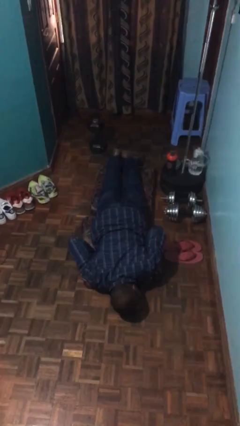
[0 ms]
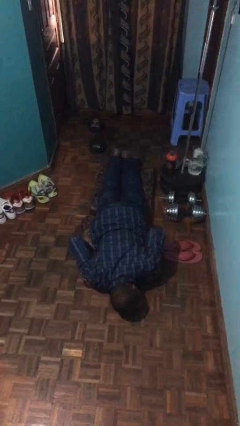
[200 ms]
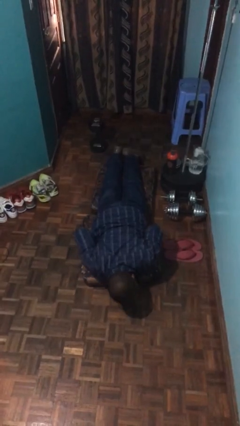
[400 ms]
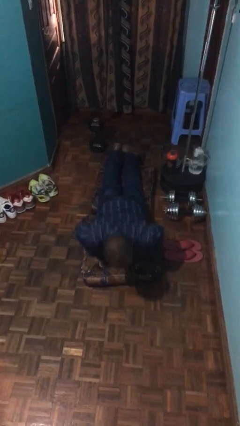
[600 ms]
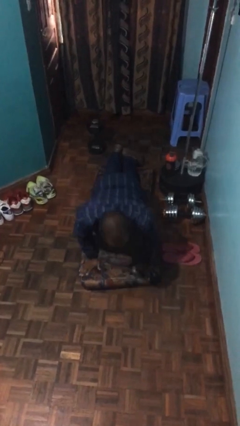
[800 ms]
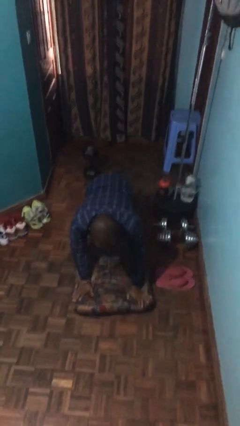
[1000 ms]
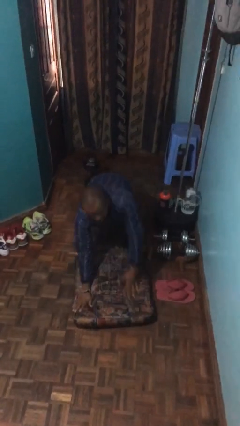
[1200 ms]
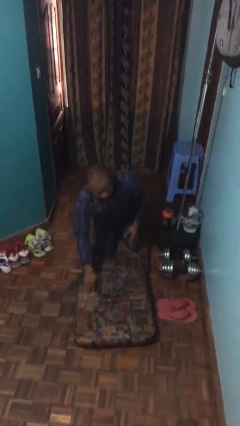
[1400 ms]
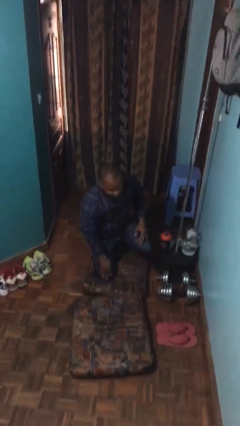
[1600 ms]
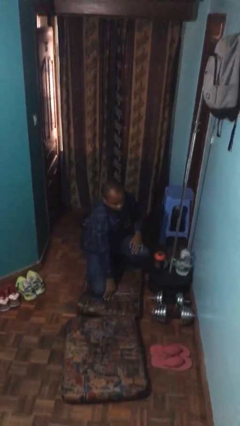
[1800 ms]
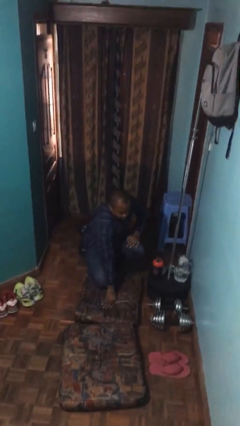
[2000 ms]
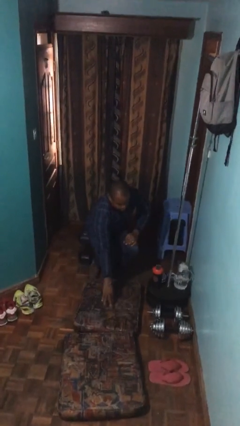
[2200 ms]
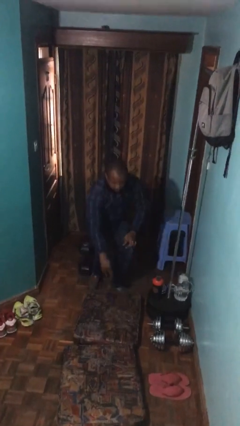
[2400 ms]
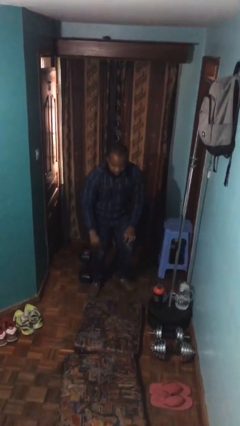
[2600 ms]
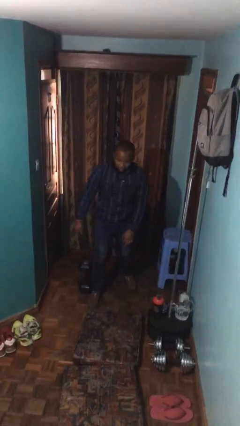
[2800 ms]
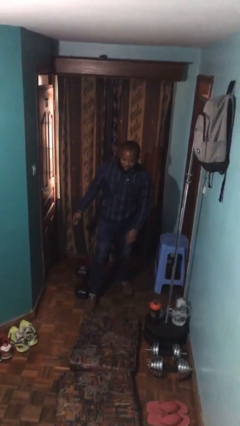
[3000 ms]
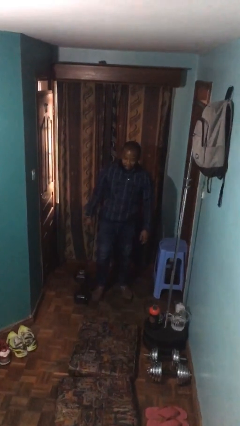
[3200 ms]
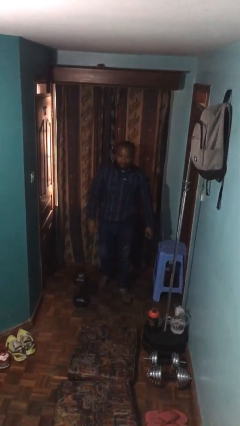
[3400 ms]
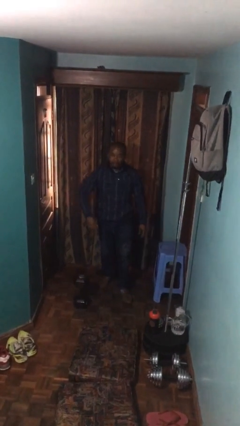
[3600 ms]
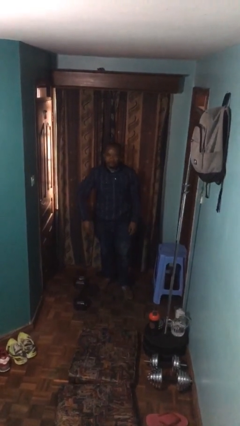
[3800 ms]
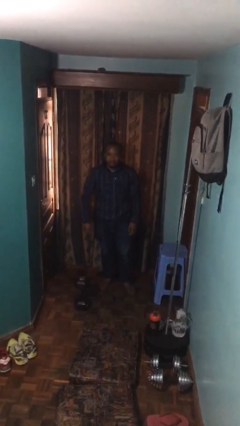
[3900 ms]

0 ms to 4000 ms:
person stands up from floor

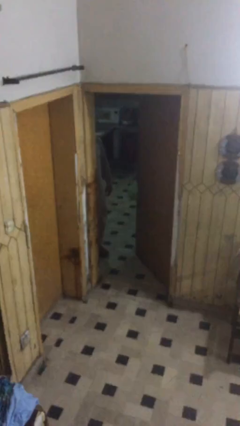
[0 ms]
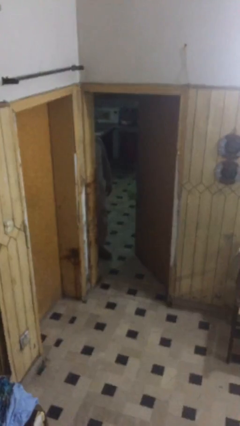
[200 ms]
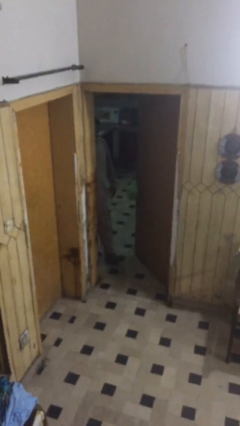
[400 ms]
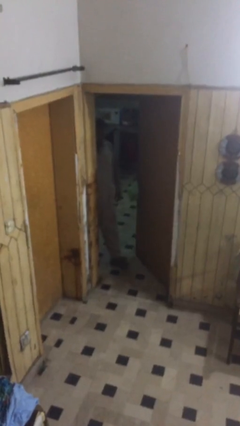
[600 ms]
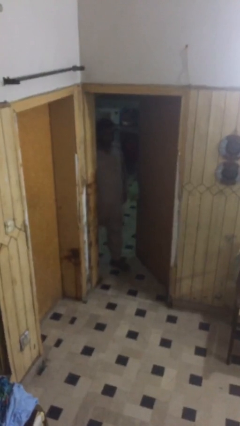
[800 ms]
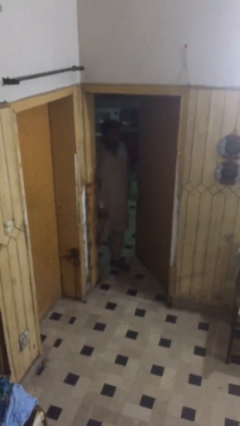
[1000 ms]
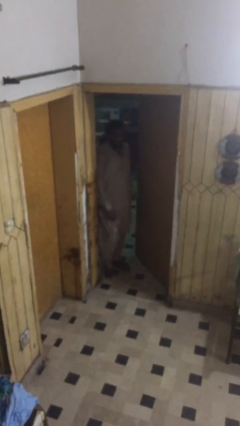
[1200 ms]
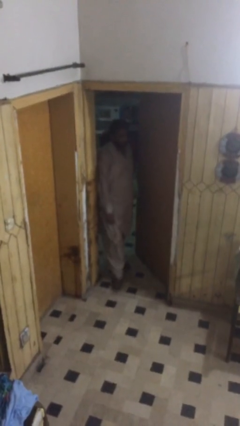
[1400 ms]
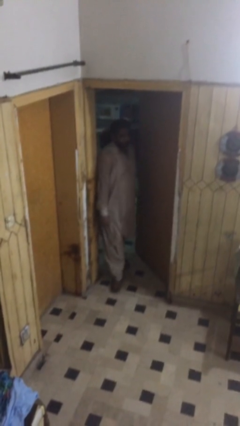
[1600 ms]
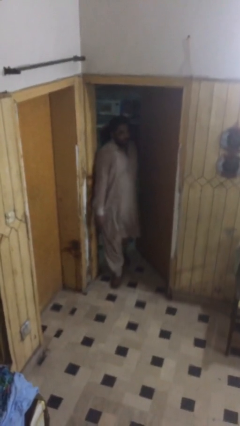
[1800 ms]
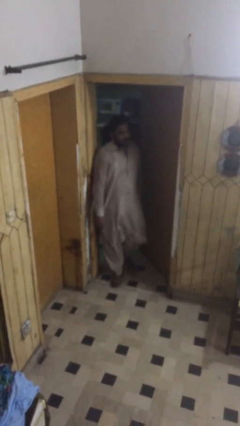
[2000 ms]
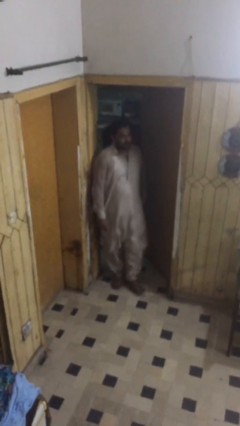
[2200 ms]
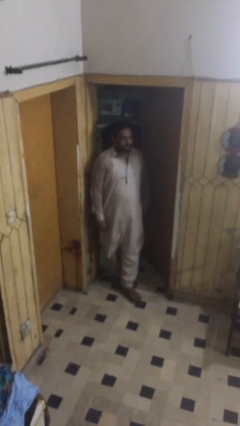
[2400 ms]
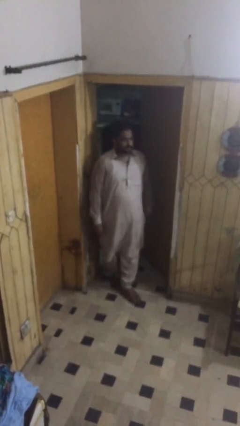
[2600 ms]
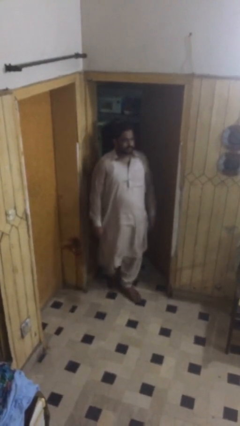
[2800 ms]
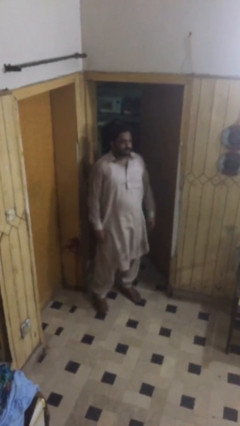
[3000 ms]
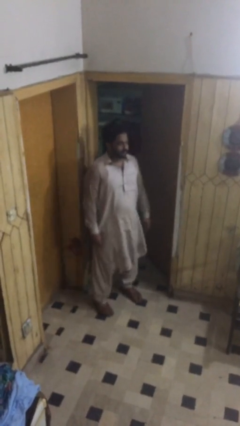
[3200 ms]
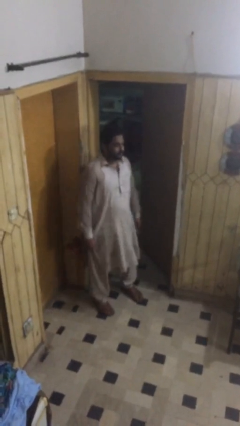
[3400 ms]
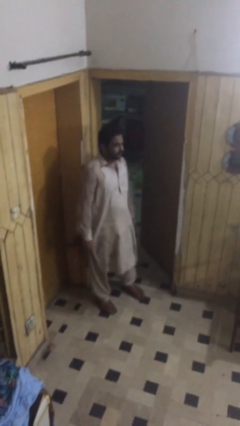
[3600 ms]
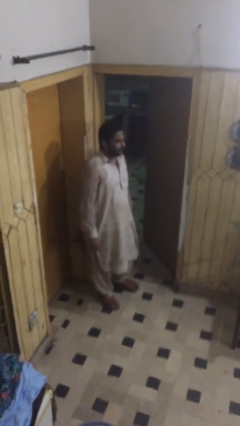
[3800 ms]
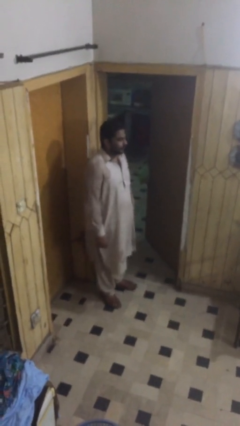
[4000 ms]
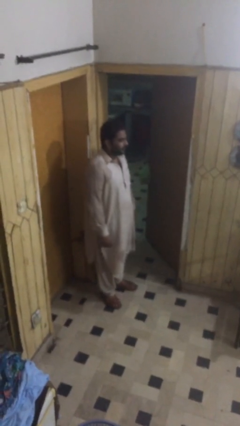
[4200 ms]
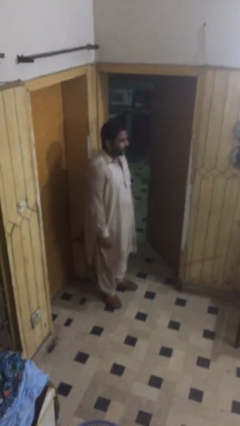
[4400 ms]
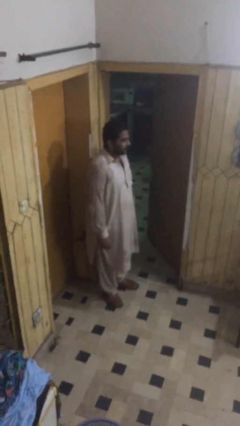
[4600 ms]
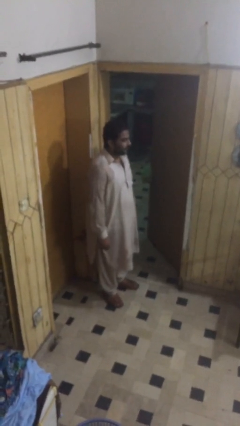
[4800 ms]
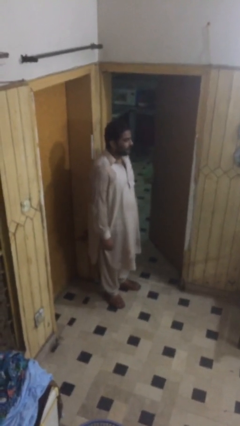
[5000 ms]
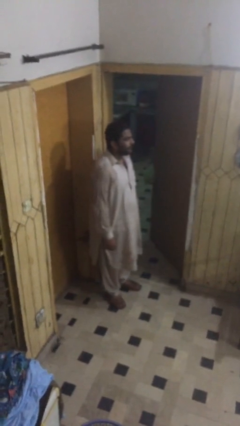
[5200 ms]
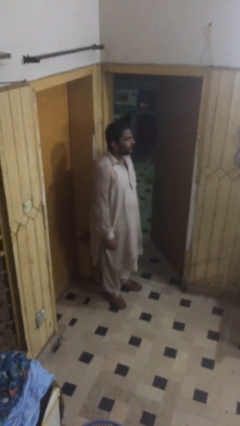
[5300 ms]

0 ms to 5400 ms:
person enters scene through structure

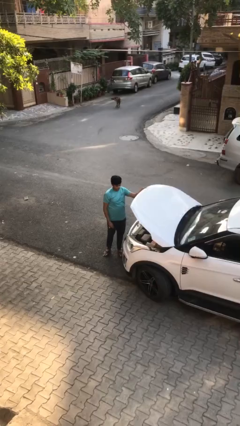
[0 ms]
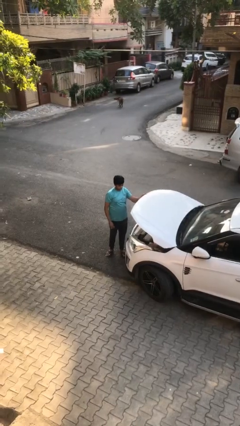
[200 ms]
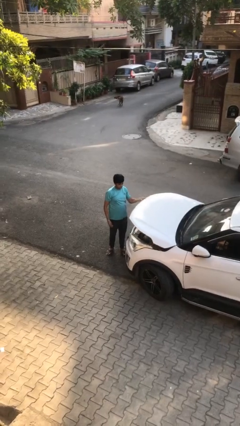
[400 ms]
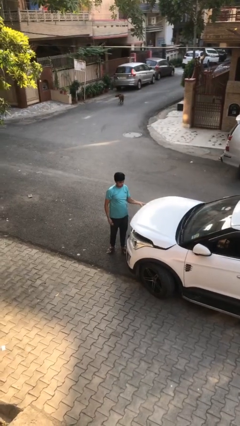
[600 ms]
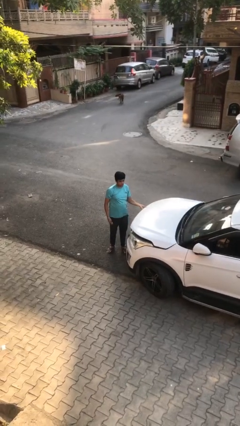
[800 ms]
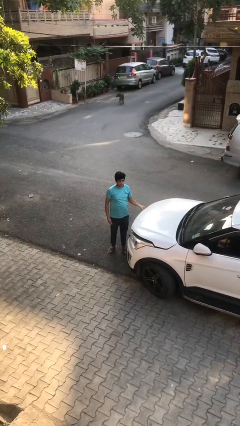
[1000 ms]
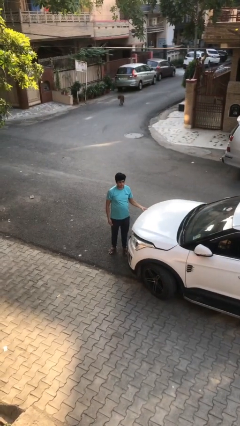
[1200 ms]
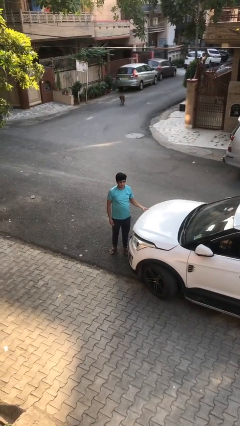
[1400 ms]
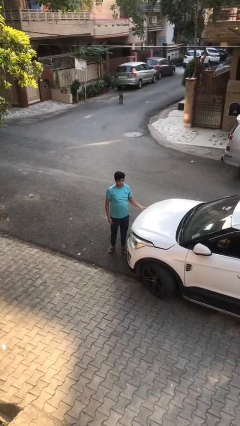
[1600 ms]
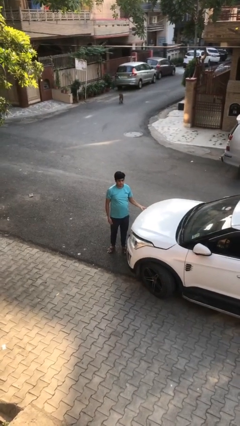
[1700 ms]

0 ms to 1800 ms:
person closes car hood

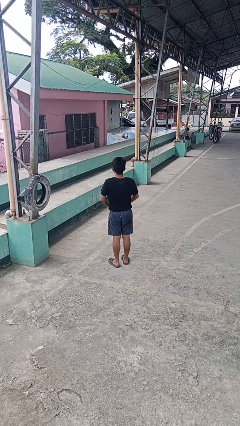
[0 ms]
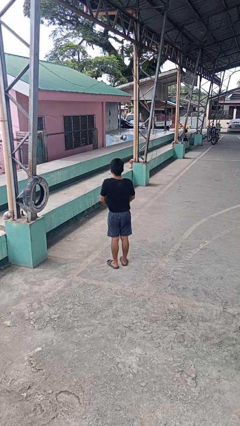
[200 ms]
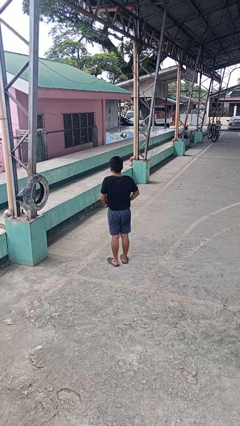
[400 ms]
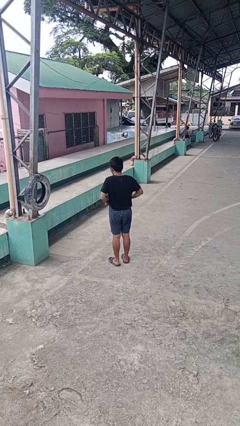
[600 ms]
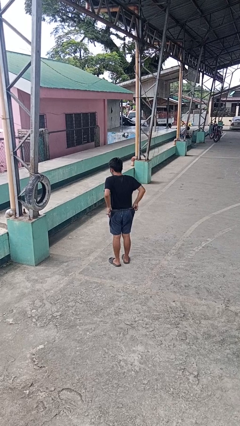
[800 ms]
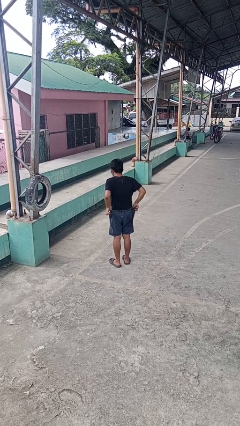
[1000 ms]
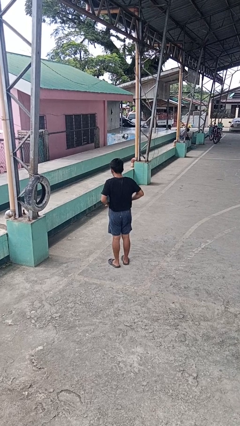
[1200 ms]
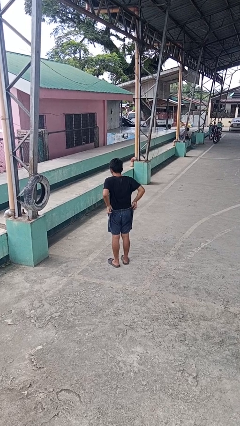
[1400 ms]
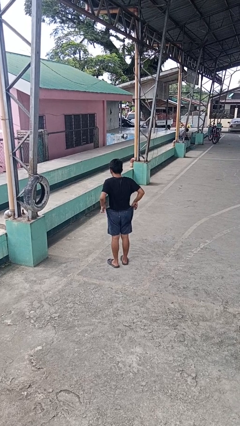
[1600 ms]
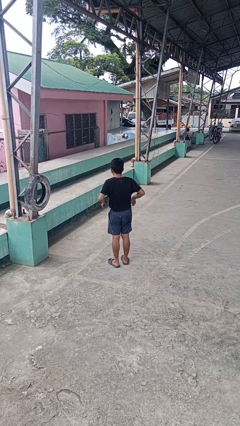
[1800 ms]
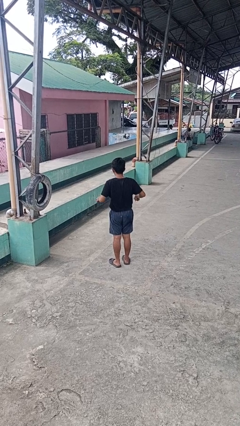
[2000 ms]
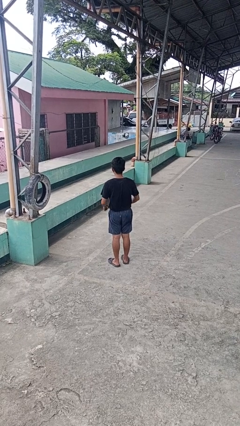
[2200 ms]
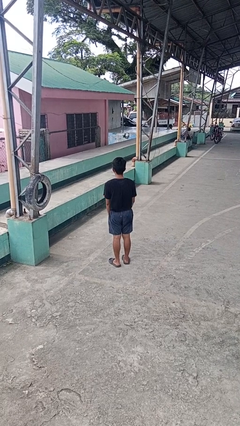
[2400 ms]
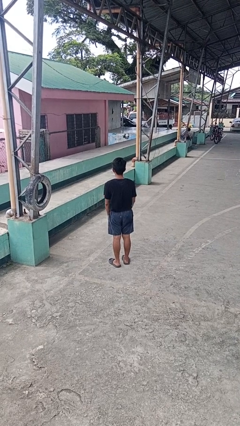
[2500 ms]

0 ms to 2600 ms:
person hikes up pants

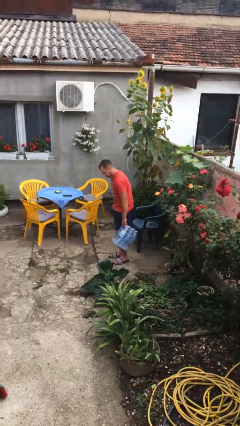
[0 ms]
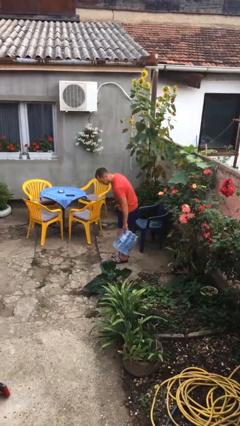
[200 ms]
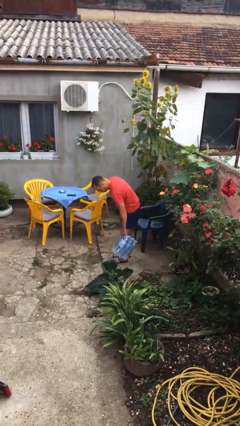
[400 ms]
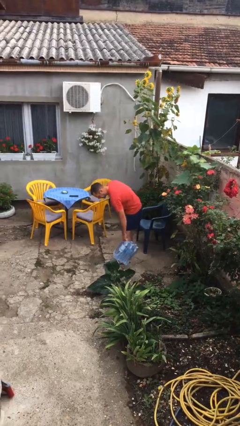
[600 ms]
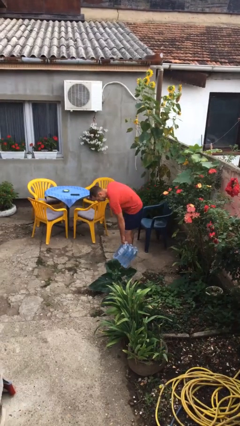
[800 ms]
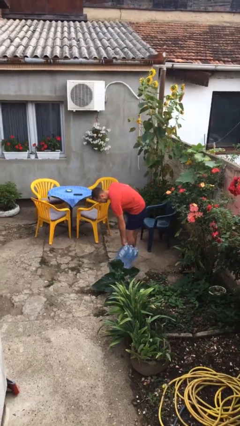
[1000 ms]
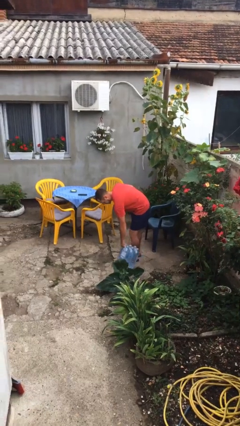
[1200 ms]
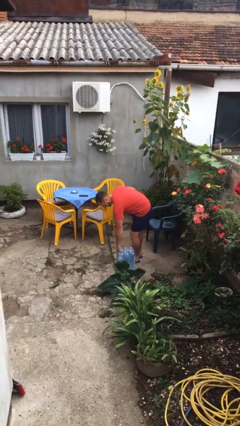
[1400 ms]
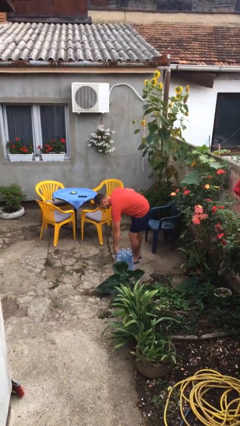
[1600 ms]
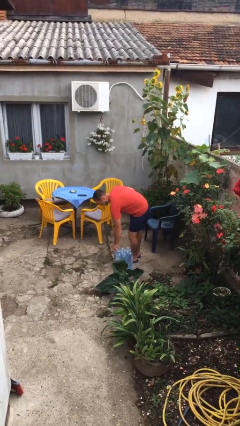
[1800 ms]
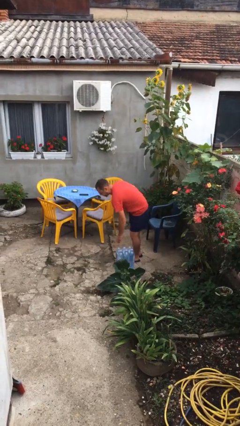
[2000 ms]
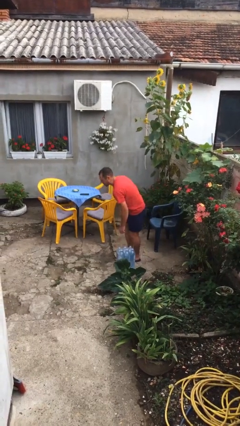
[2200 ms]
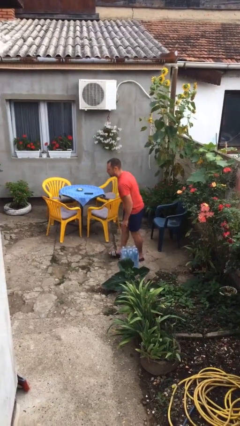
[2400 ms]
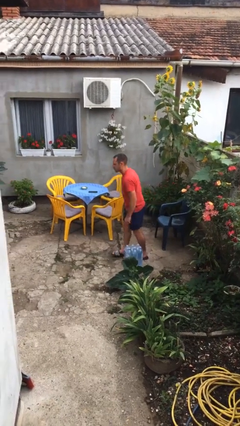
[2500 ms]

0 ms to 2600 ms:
person puts down object on floor

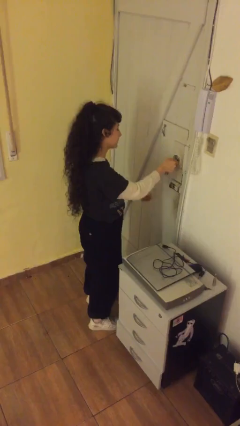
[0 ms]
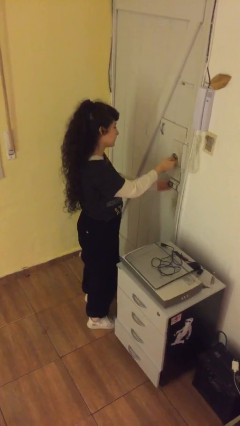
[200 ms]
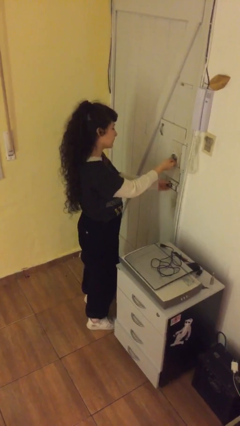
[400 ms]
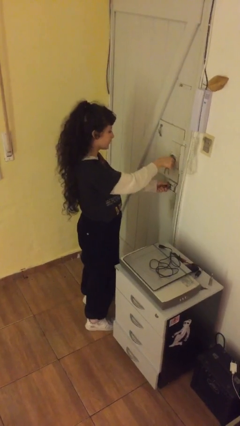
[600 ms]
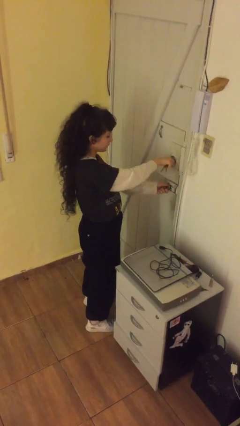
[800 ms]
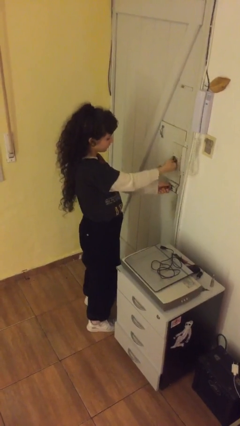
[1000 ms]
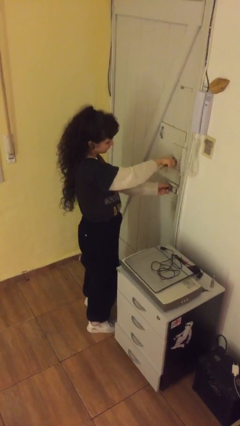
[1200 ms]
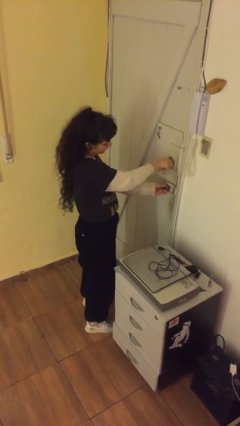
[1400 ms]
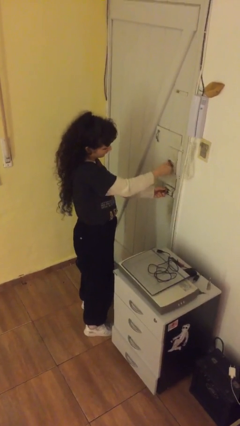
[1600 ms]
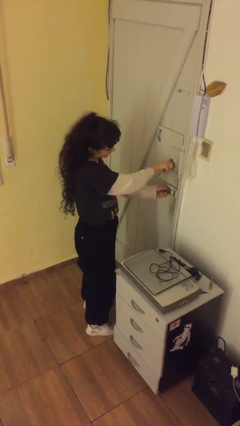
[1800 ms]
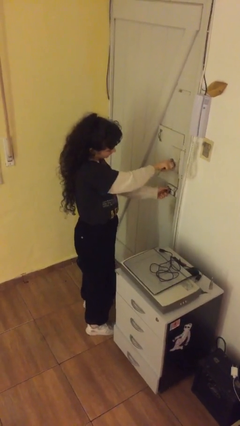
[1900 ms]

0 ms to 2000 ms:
person unlocks door with keys
